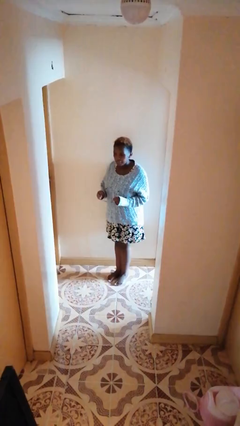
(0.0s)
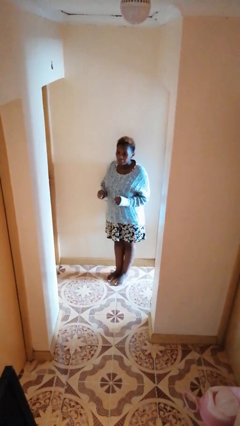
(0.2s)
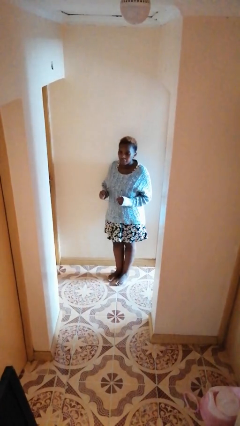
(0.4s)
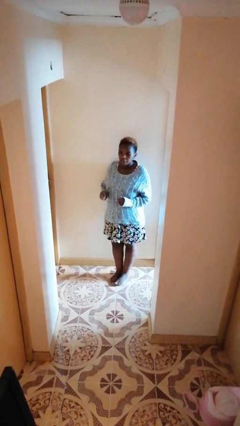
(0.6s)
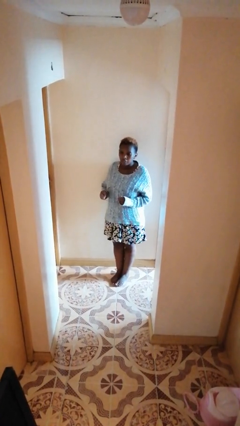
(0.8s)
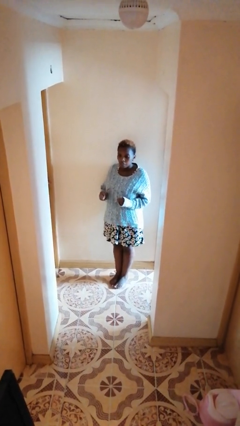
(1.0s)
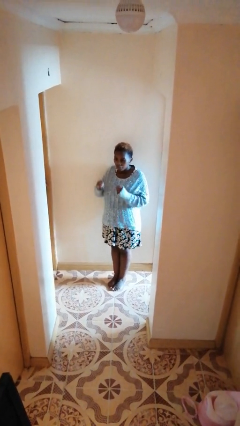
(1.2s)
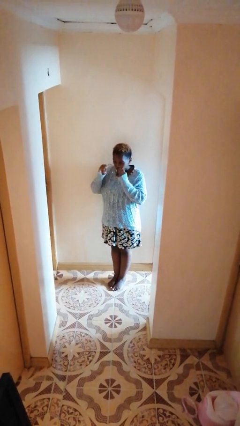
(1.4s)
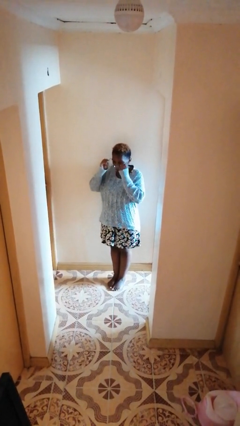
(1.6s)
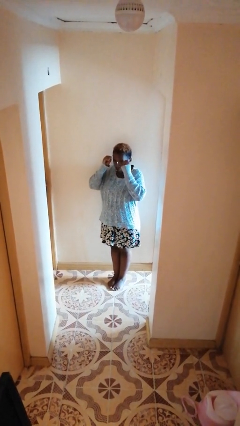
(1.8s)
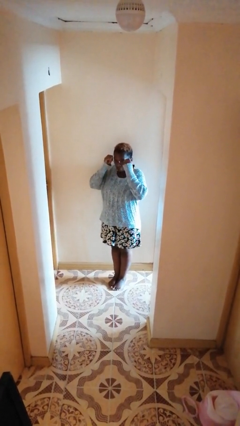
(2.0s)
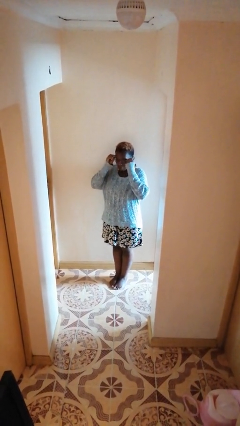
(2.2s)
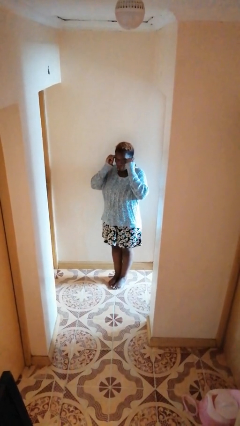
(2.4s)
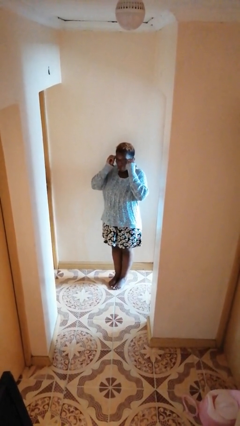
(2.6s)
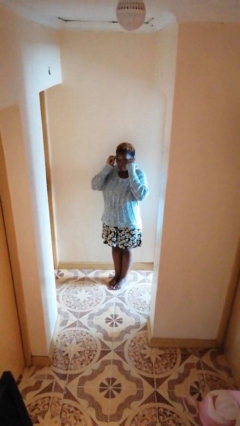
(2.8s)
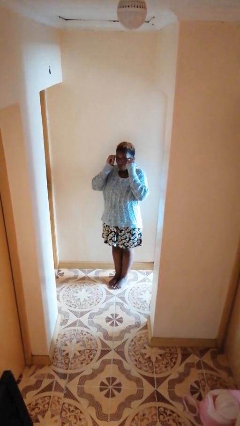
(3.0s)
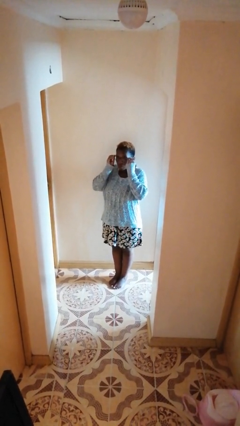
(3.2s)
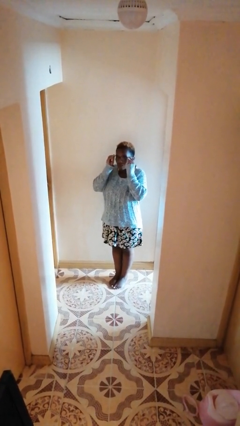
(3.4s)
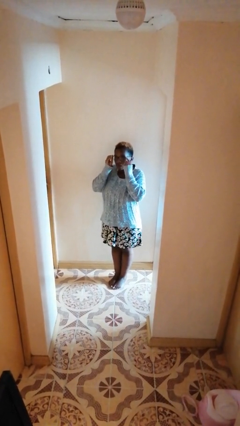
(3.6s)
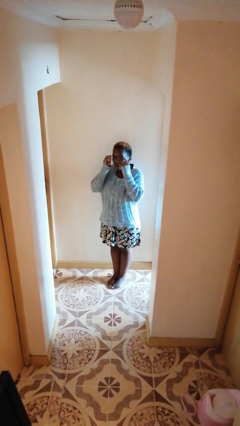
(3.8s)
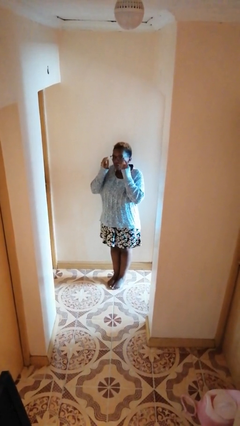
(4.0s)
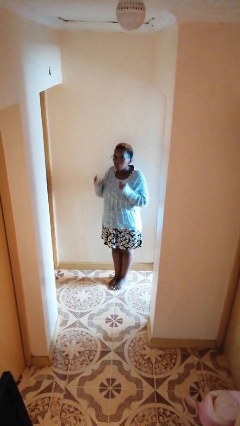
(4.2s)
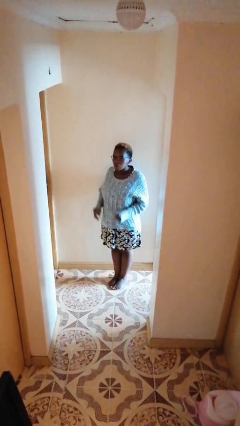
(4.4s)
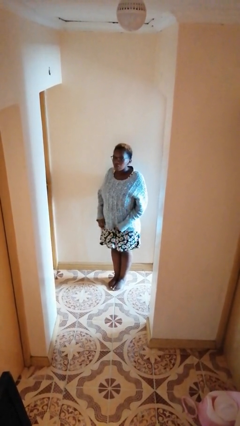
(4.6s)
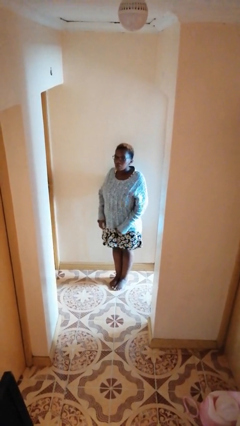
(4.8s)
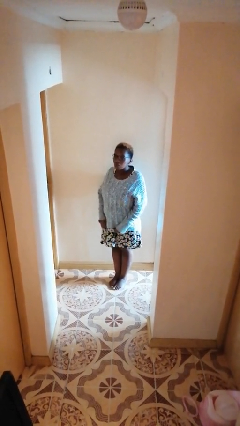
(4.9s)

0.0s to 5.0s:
person puts on glasses

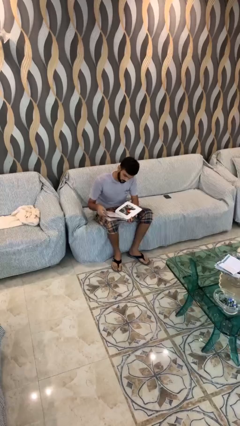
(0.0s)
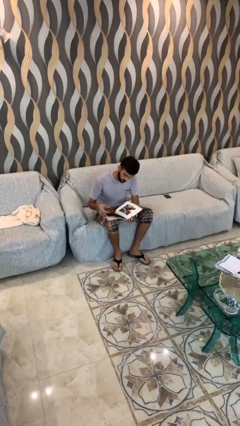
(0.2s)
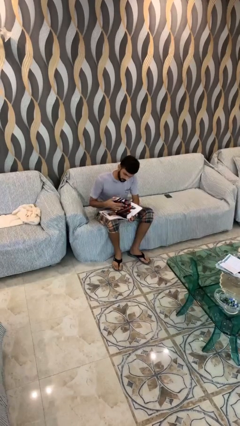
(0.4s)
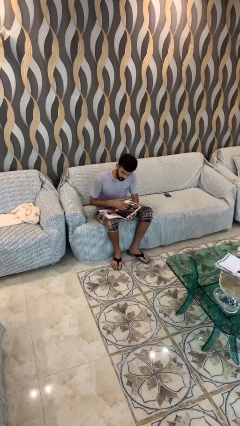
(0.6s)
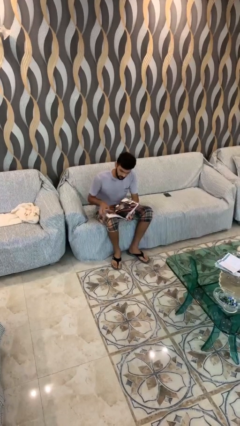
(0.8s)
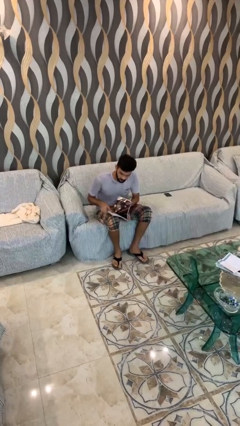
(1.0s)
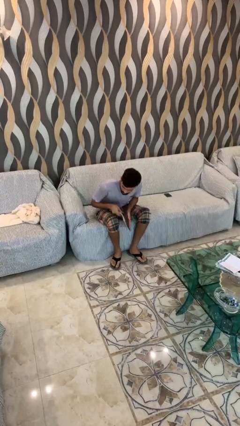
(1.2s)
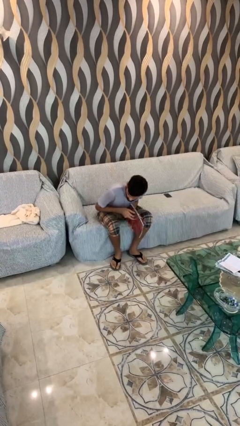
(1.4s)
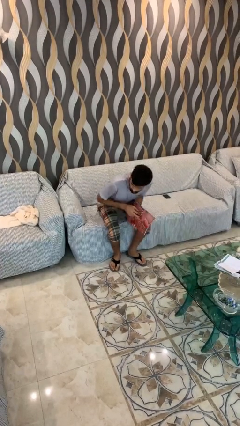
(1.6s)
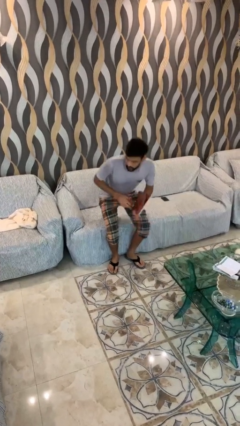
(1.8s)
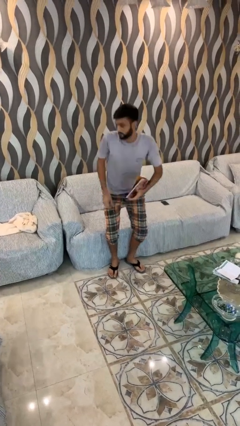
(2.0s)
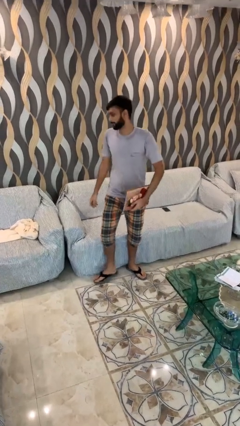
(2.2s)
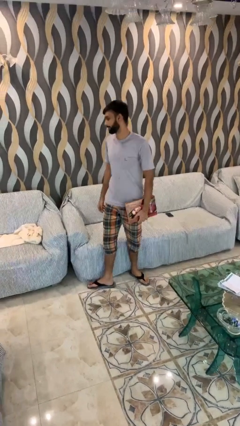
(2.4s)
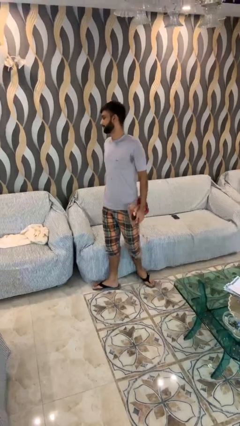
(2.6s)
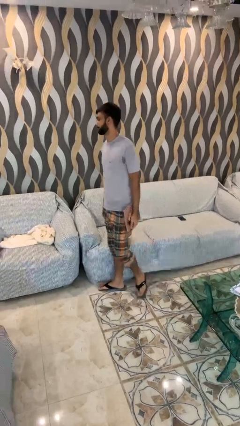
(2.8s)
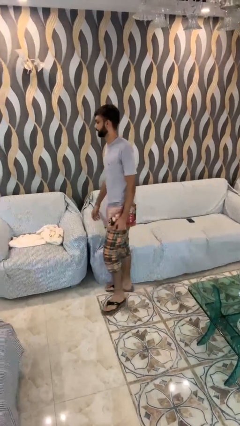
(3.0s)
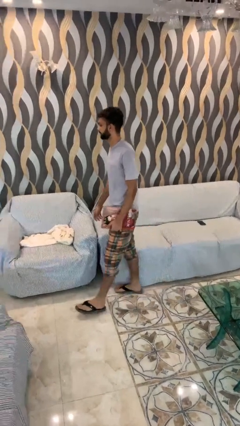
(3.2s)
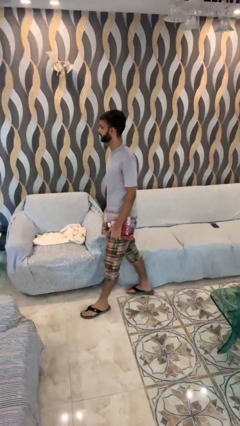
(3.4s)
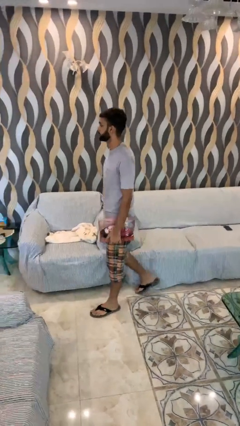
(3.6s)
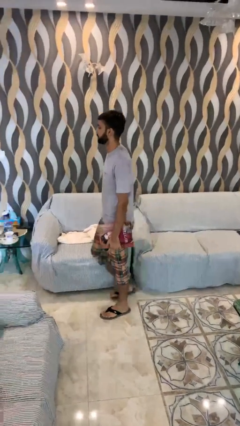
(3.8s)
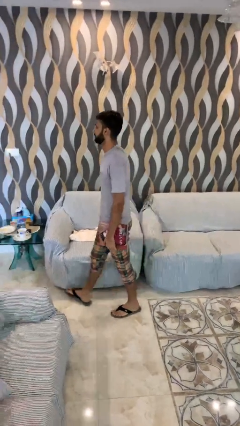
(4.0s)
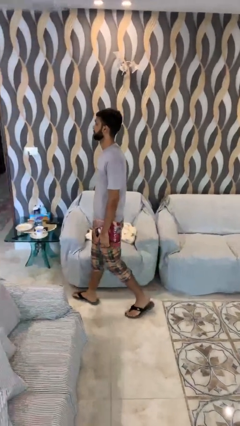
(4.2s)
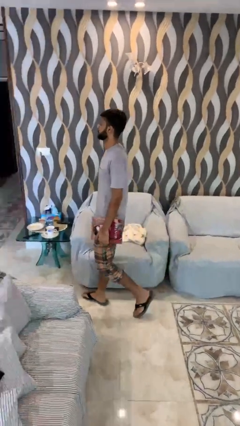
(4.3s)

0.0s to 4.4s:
person stands up

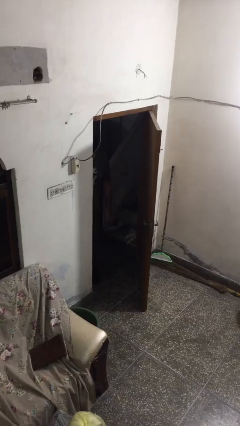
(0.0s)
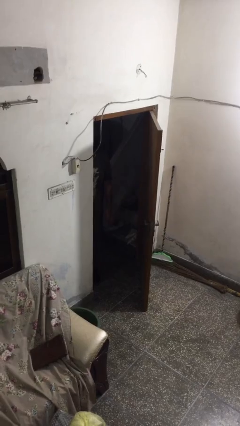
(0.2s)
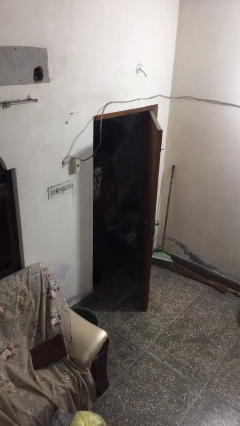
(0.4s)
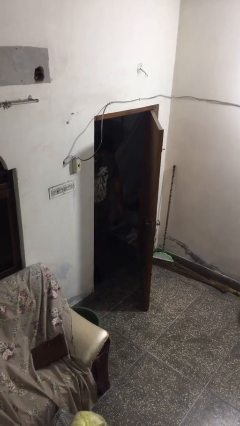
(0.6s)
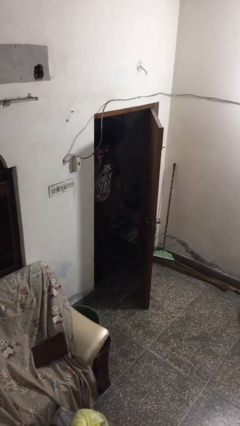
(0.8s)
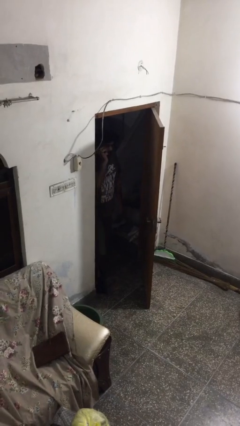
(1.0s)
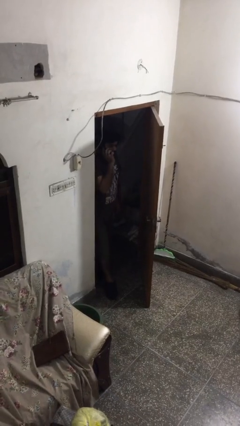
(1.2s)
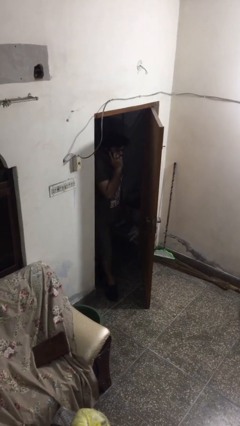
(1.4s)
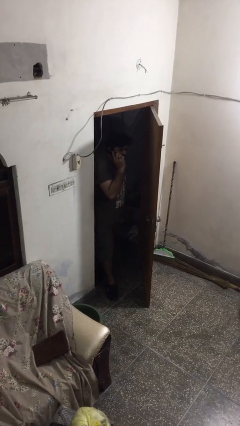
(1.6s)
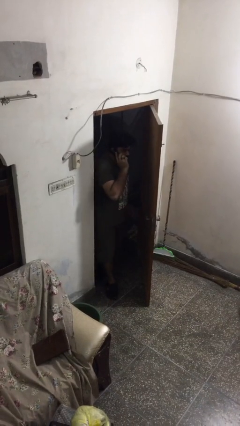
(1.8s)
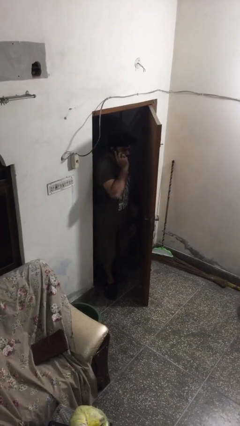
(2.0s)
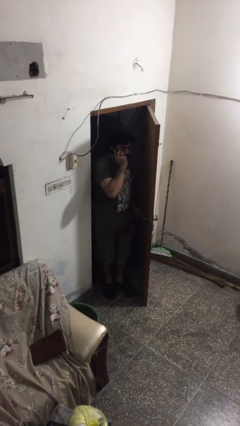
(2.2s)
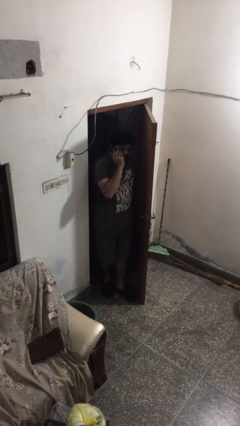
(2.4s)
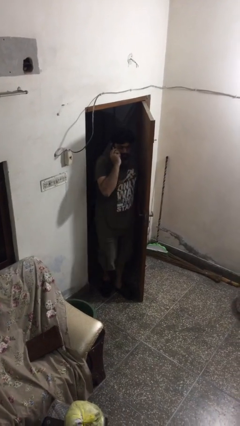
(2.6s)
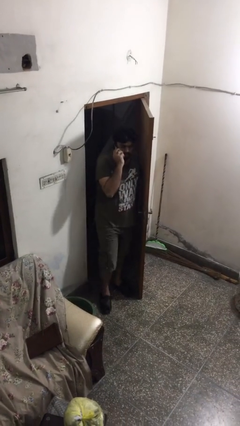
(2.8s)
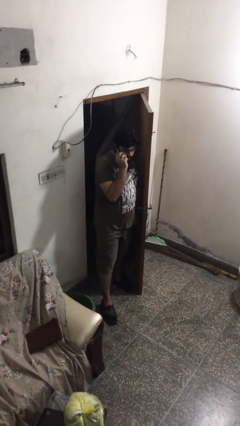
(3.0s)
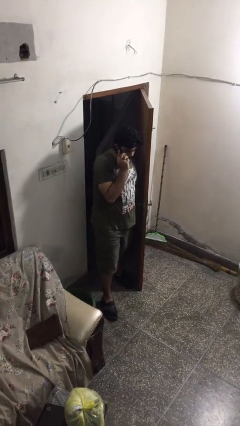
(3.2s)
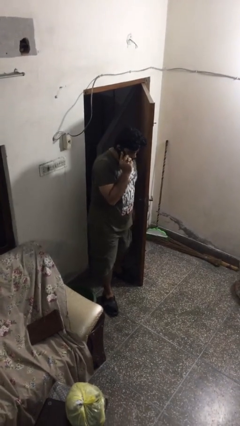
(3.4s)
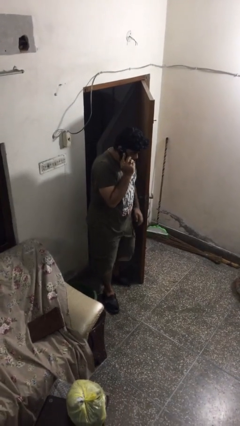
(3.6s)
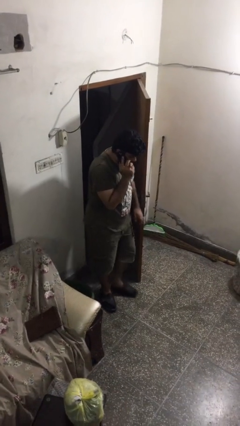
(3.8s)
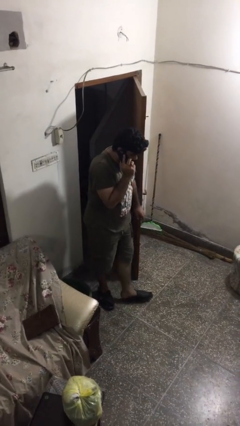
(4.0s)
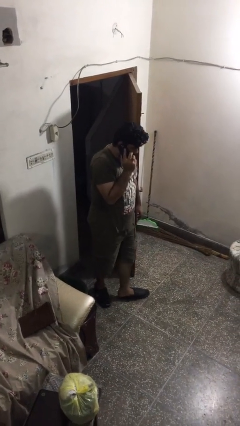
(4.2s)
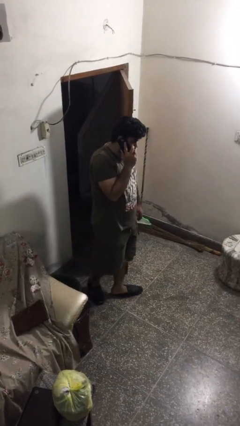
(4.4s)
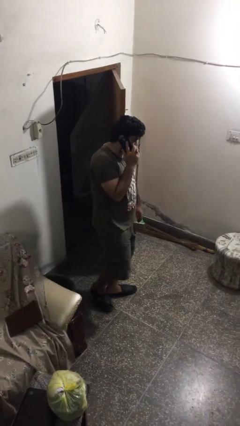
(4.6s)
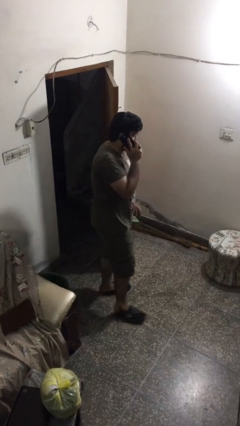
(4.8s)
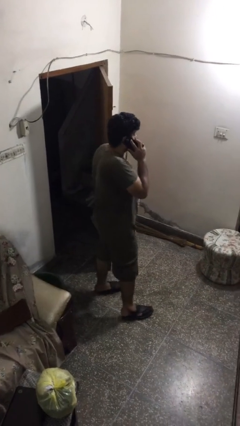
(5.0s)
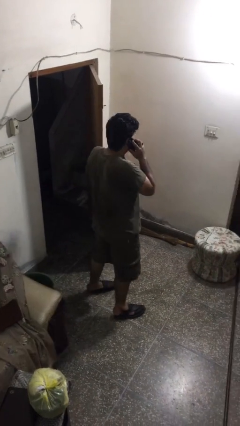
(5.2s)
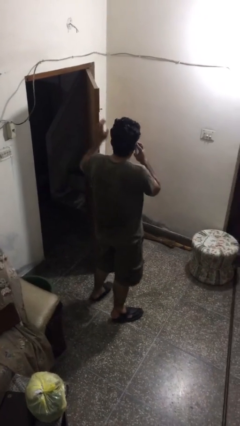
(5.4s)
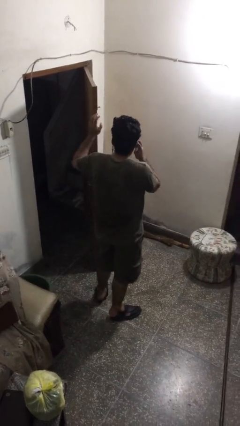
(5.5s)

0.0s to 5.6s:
person enters scene through structure

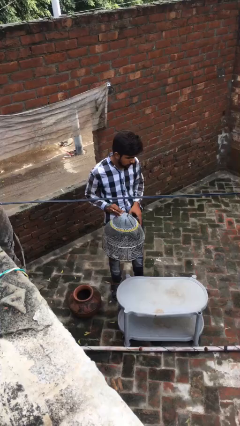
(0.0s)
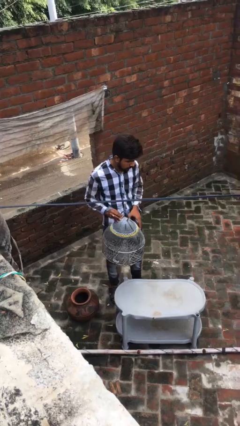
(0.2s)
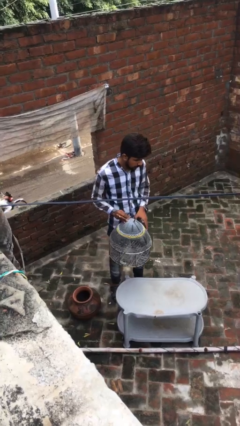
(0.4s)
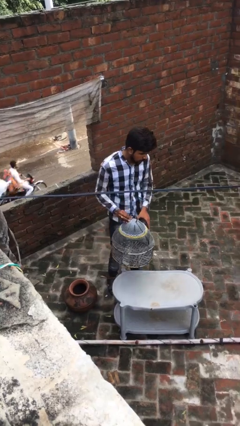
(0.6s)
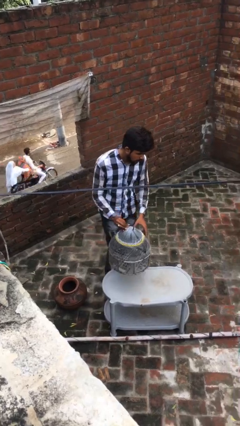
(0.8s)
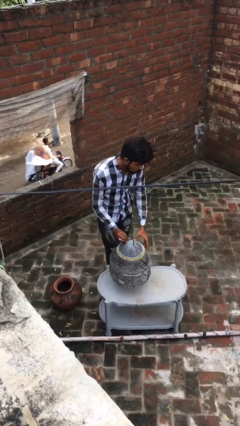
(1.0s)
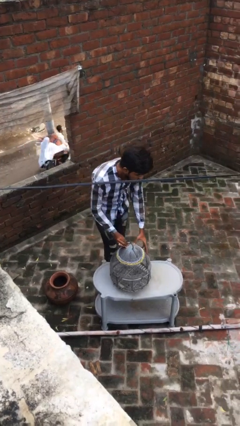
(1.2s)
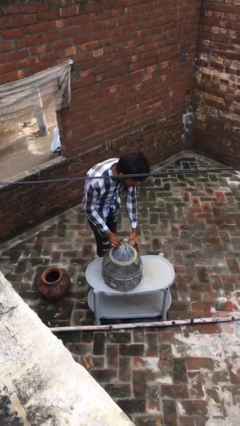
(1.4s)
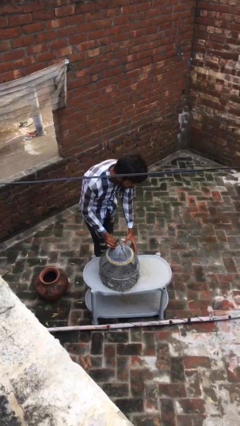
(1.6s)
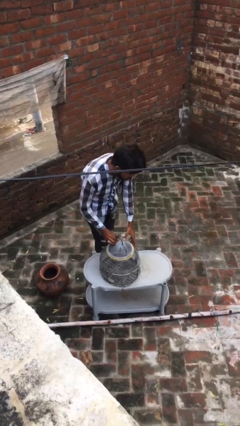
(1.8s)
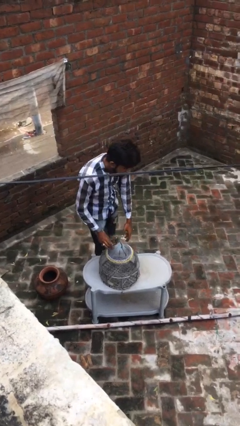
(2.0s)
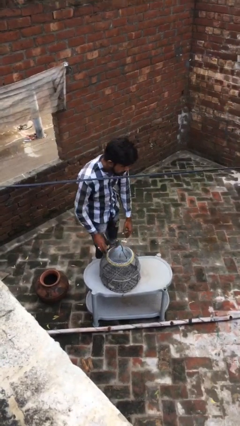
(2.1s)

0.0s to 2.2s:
person puts down object on table

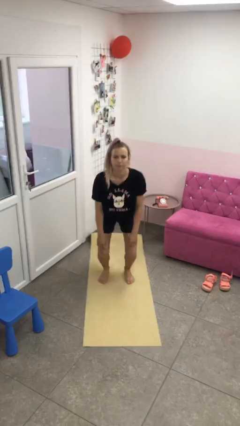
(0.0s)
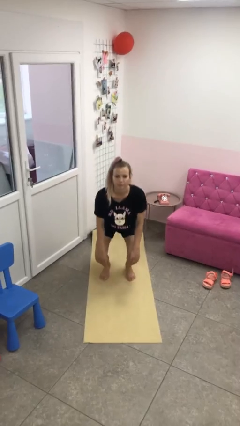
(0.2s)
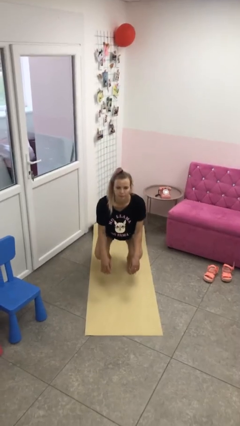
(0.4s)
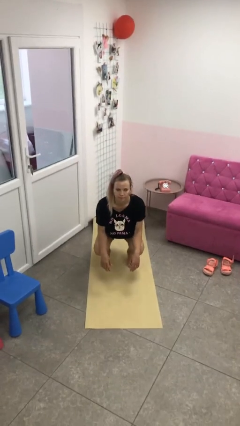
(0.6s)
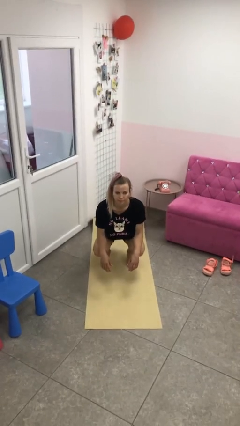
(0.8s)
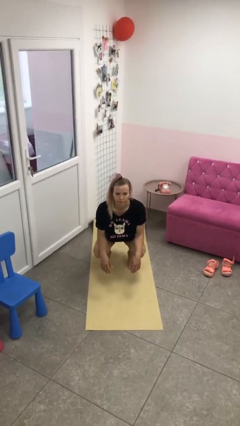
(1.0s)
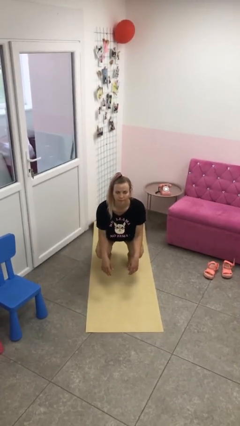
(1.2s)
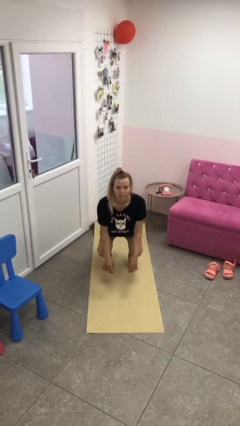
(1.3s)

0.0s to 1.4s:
person squats
